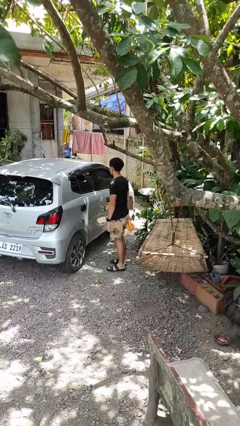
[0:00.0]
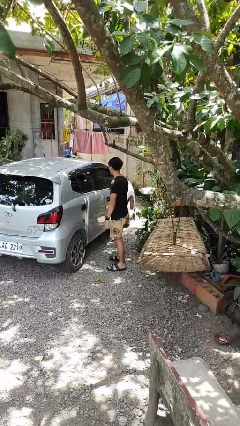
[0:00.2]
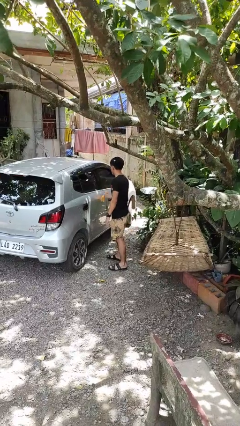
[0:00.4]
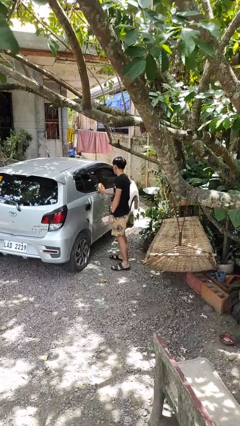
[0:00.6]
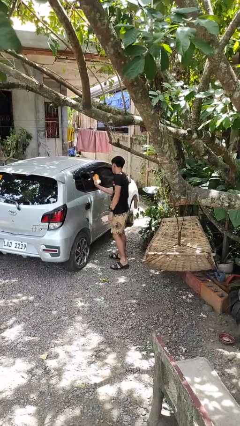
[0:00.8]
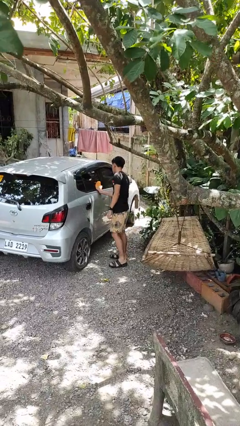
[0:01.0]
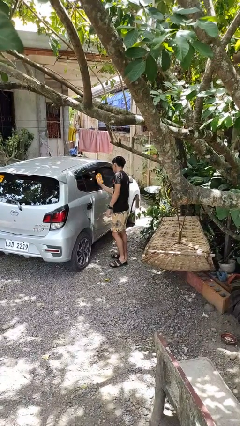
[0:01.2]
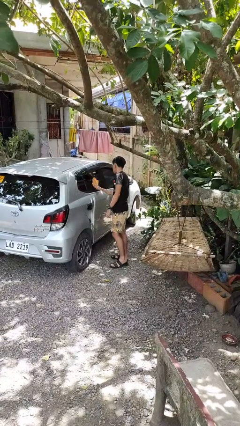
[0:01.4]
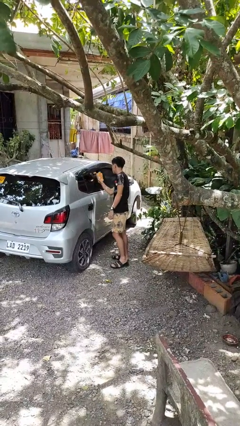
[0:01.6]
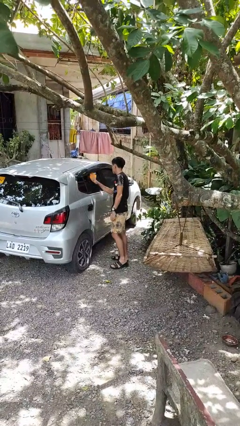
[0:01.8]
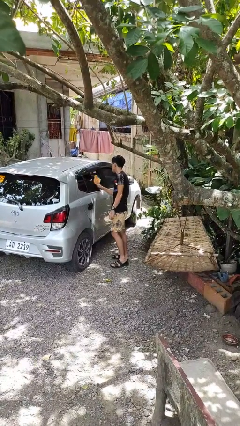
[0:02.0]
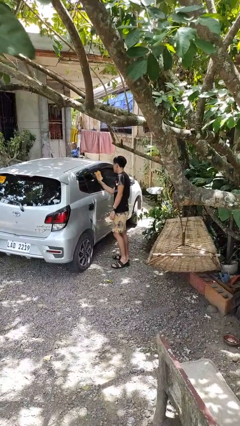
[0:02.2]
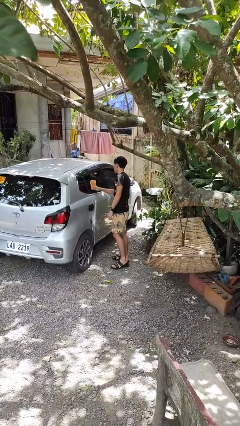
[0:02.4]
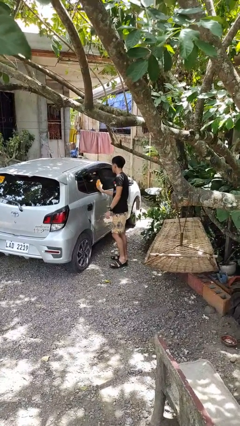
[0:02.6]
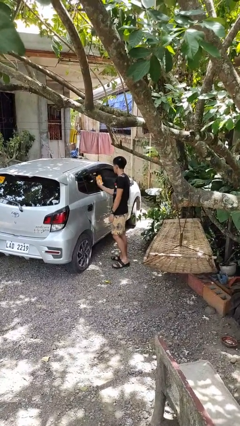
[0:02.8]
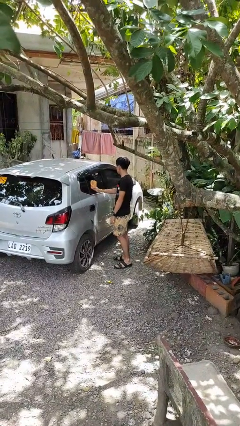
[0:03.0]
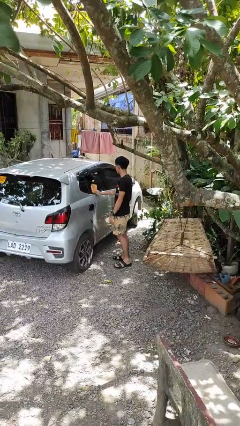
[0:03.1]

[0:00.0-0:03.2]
person polishes car with rag

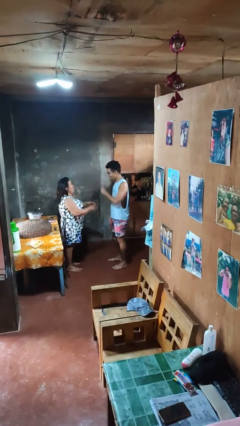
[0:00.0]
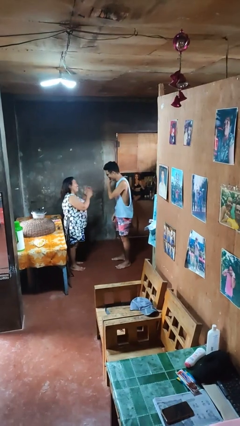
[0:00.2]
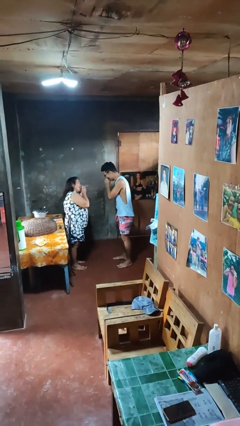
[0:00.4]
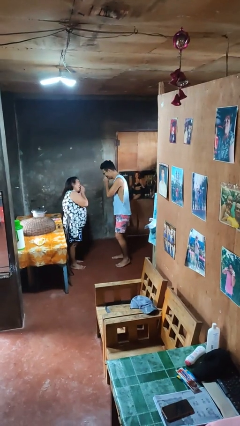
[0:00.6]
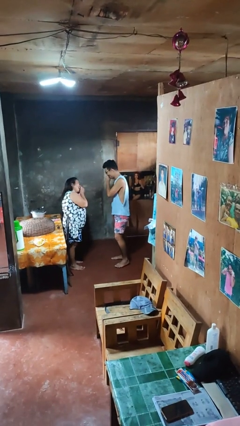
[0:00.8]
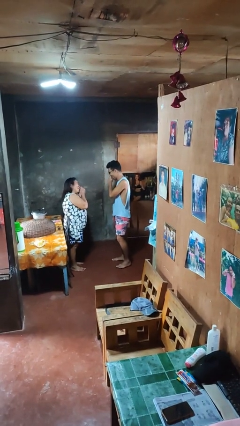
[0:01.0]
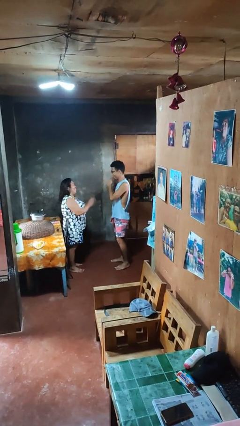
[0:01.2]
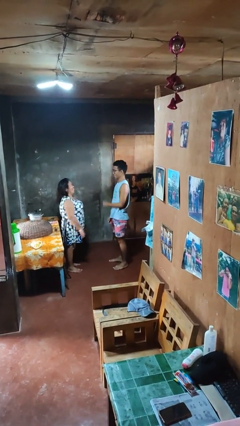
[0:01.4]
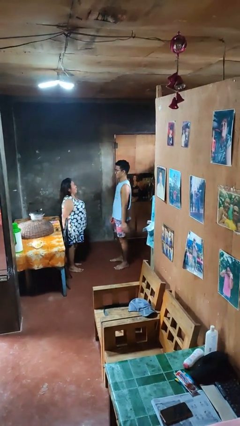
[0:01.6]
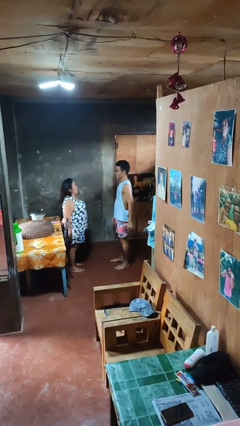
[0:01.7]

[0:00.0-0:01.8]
person laughs with person

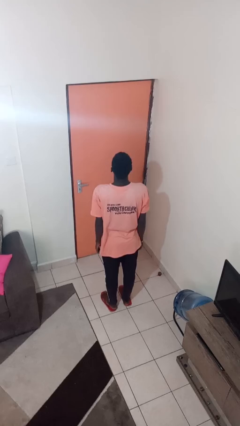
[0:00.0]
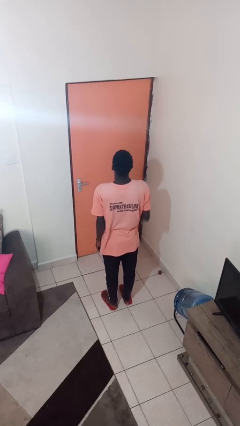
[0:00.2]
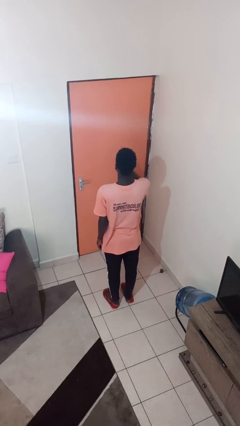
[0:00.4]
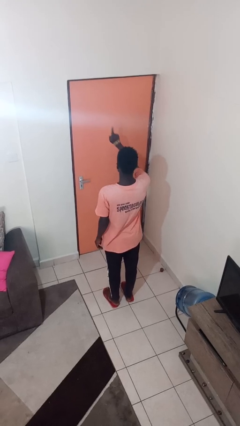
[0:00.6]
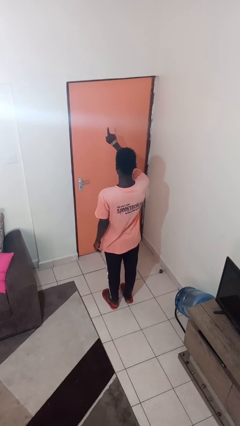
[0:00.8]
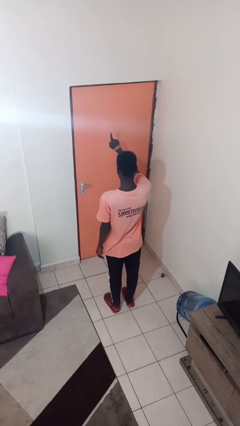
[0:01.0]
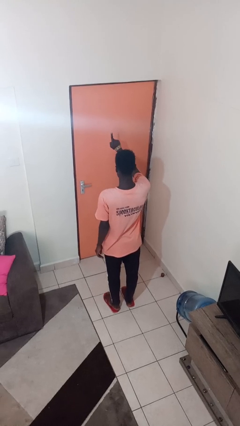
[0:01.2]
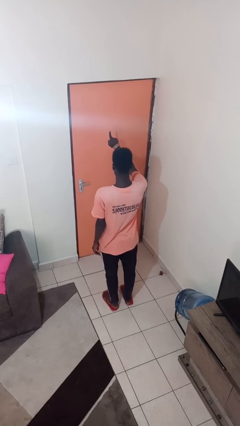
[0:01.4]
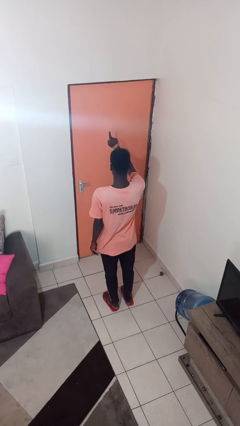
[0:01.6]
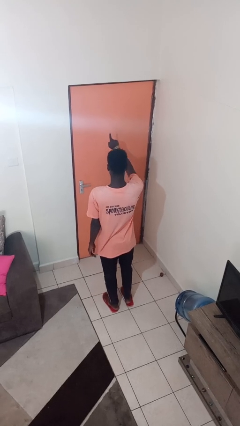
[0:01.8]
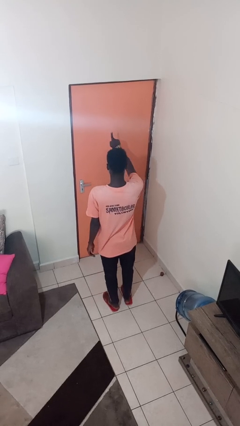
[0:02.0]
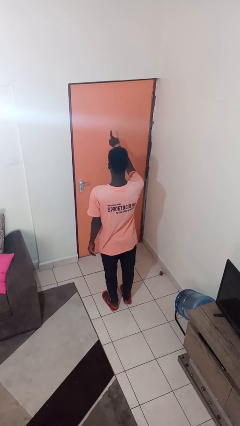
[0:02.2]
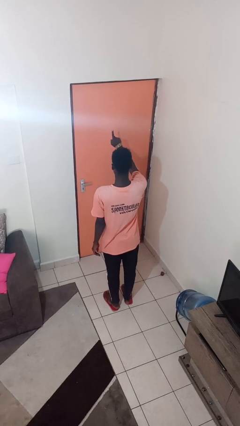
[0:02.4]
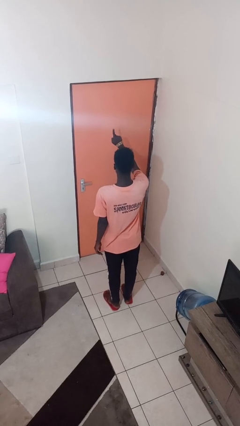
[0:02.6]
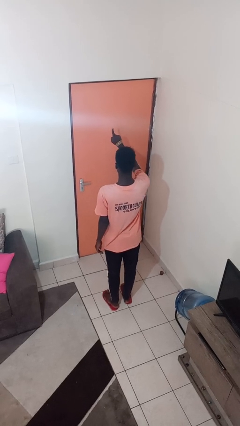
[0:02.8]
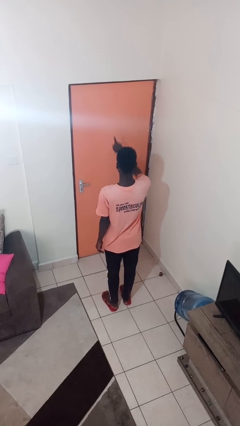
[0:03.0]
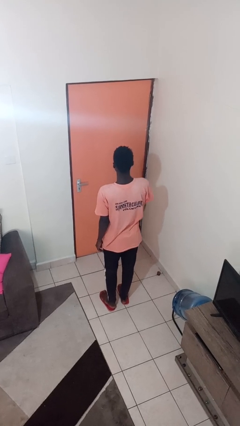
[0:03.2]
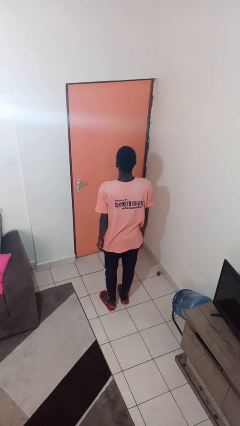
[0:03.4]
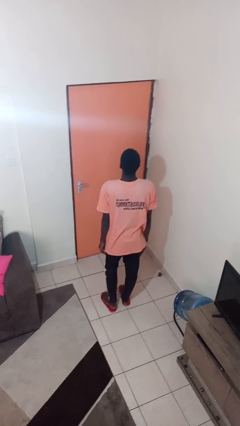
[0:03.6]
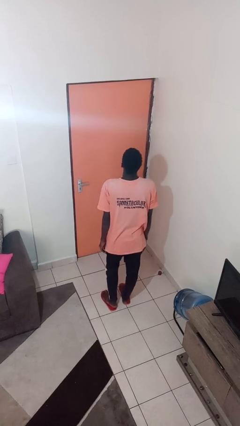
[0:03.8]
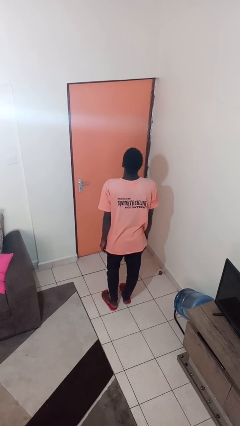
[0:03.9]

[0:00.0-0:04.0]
person gestures number one

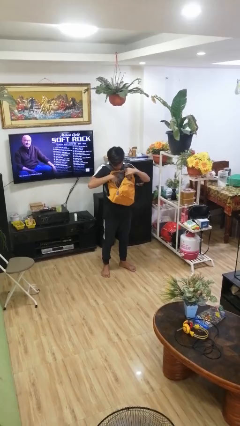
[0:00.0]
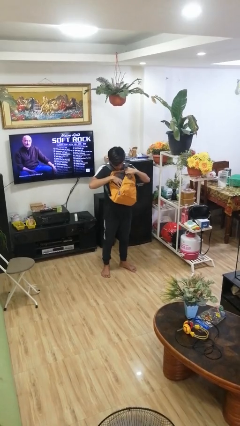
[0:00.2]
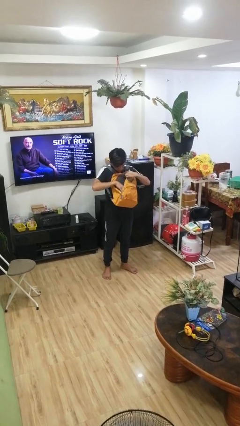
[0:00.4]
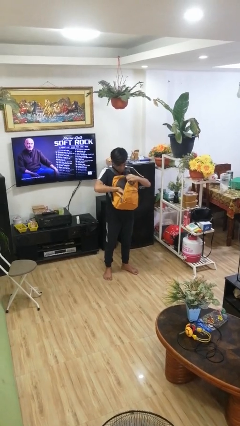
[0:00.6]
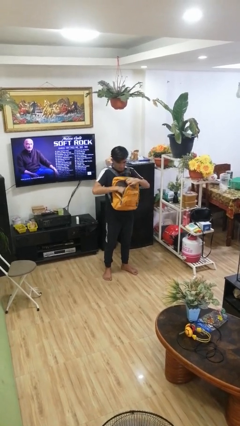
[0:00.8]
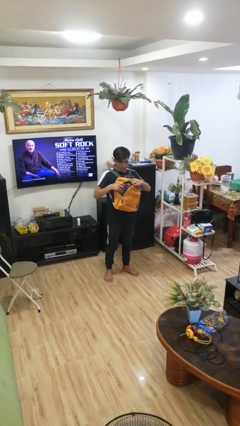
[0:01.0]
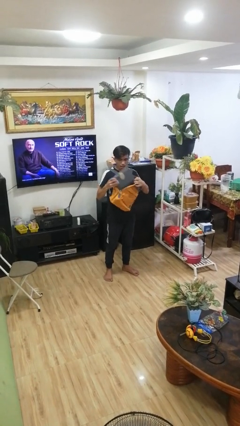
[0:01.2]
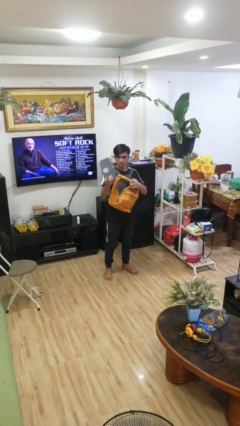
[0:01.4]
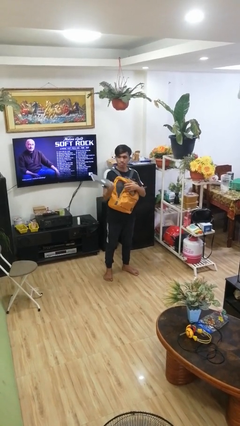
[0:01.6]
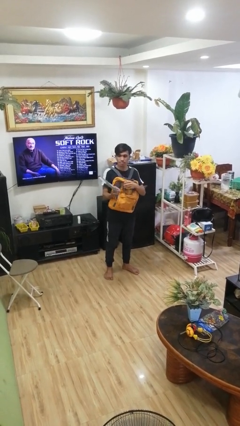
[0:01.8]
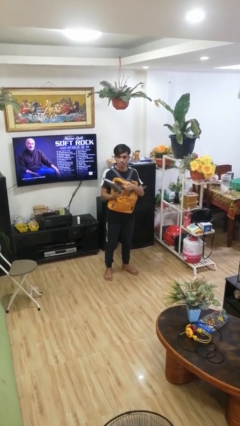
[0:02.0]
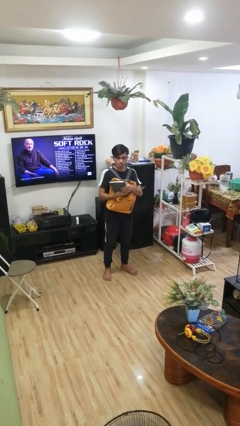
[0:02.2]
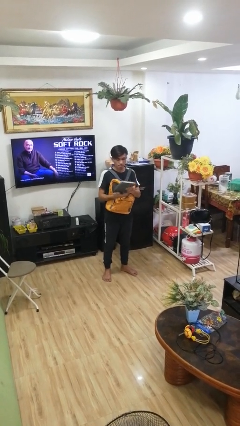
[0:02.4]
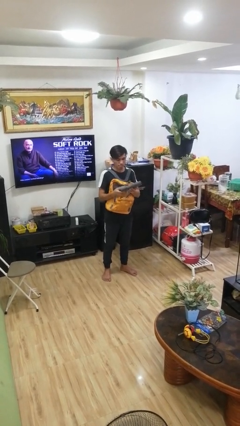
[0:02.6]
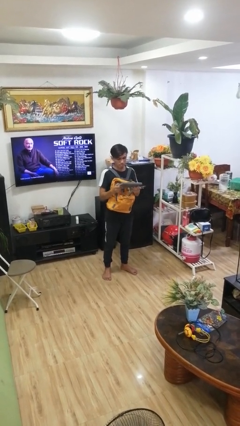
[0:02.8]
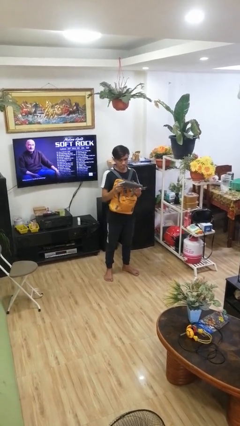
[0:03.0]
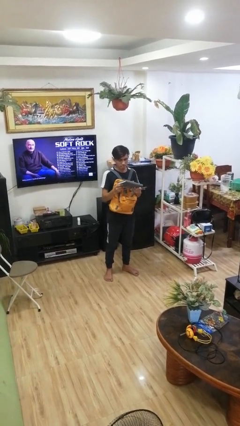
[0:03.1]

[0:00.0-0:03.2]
person takes object from backpack

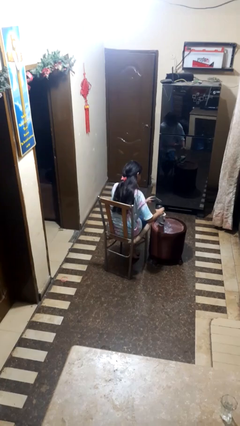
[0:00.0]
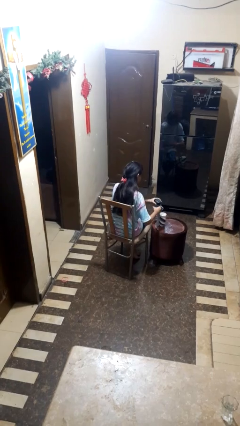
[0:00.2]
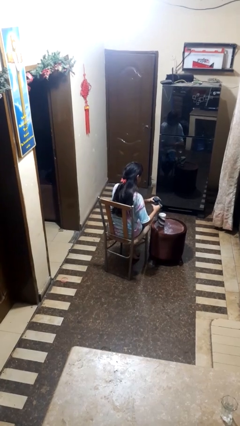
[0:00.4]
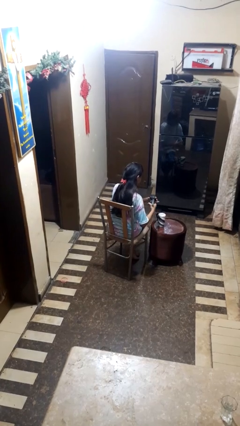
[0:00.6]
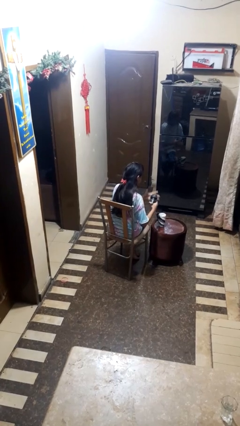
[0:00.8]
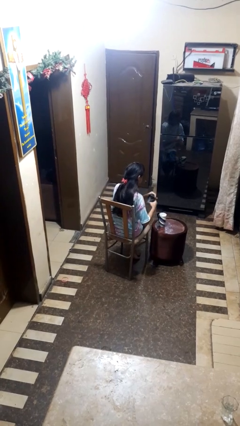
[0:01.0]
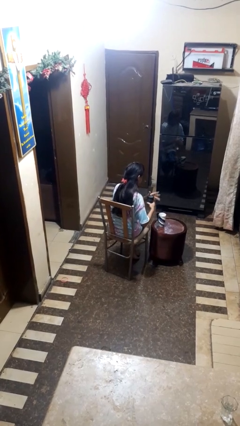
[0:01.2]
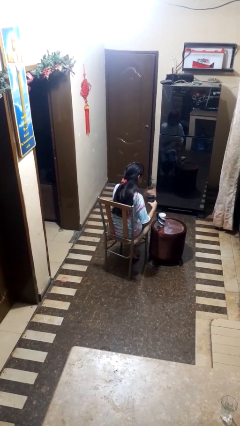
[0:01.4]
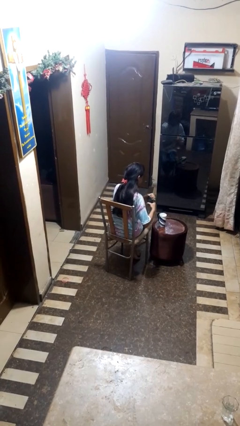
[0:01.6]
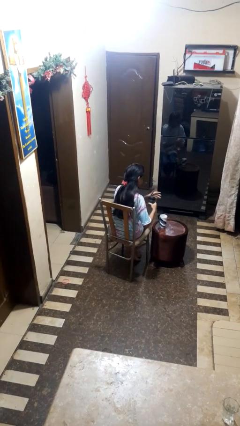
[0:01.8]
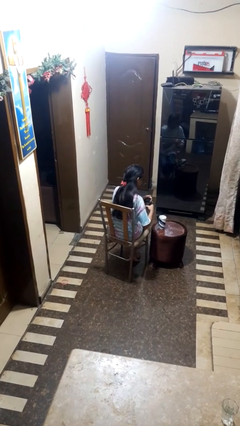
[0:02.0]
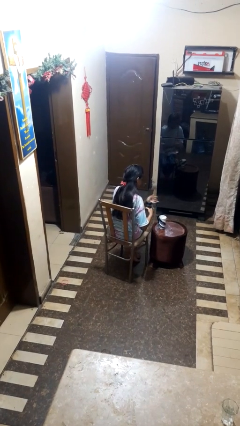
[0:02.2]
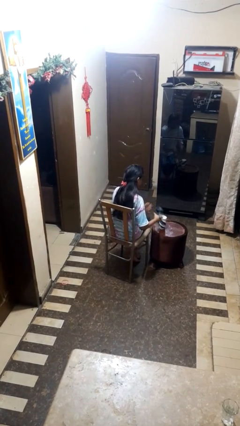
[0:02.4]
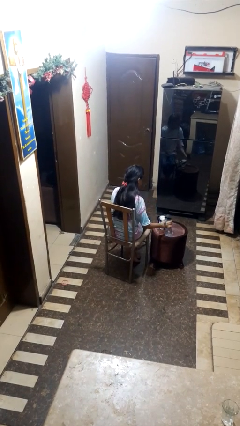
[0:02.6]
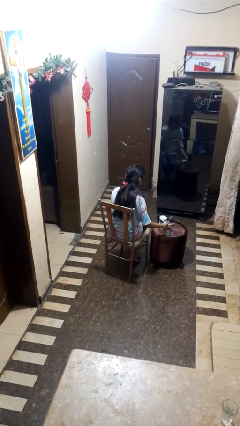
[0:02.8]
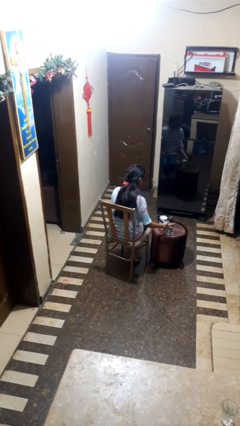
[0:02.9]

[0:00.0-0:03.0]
person screws lid to bottle

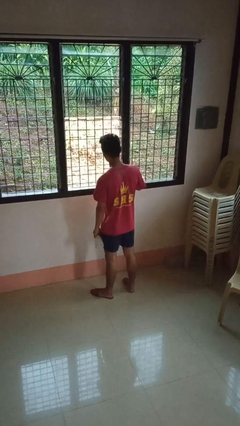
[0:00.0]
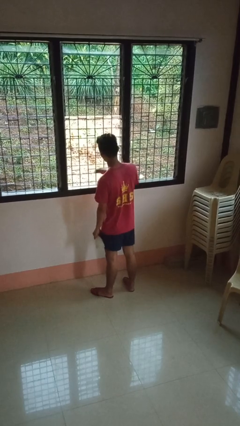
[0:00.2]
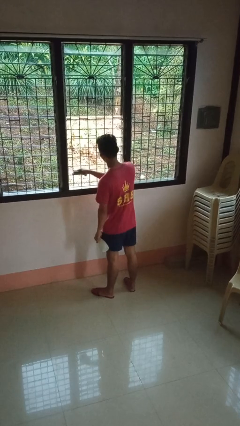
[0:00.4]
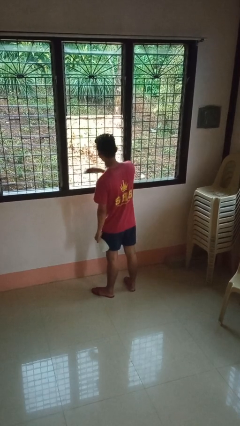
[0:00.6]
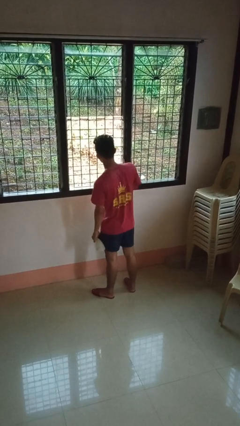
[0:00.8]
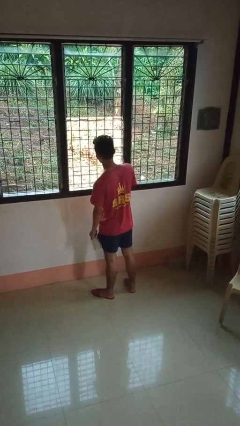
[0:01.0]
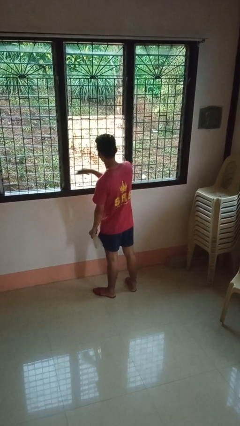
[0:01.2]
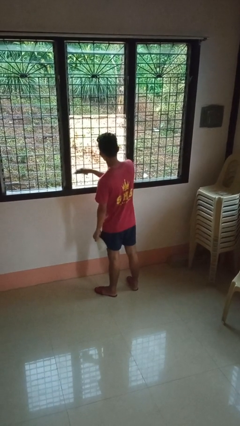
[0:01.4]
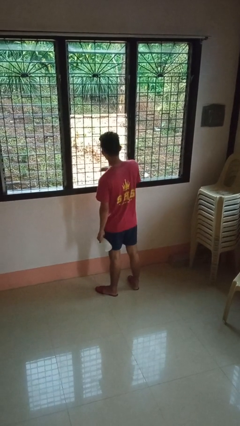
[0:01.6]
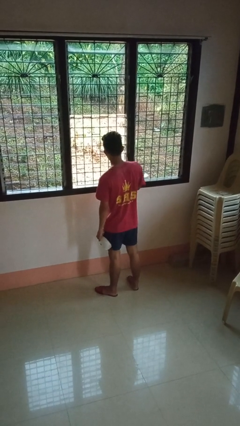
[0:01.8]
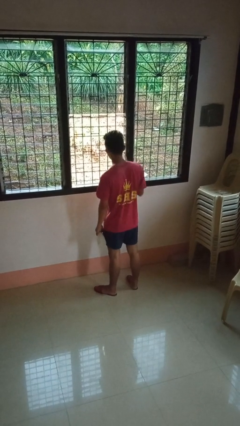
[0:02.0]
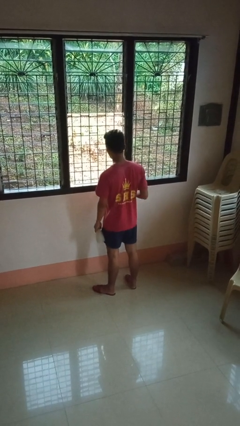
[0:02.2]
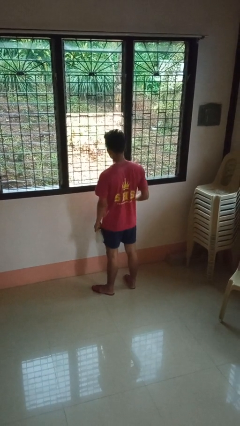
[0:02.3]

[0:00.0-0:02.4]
person washes window
